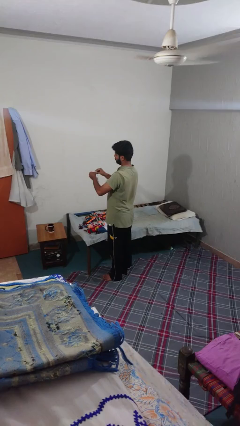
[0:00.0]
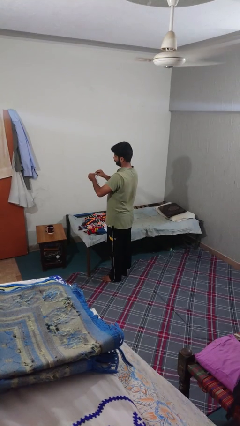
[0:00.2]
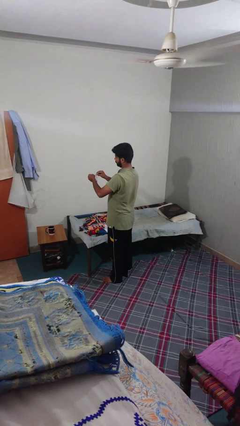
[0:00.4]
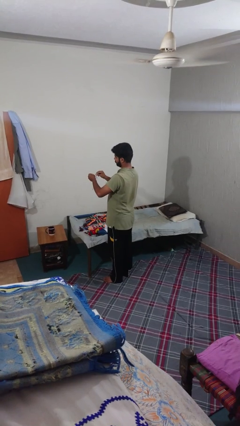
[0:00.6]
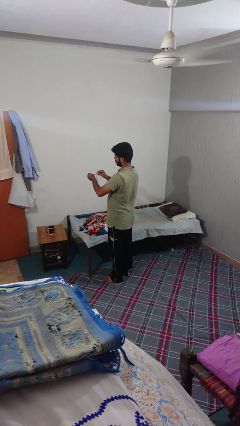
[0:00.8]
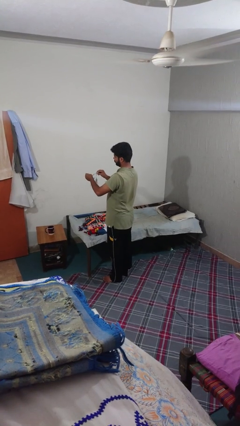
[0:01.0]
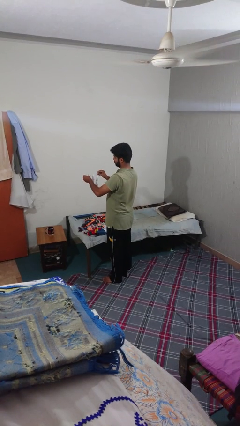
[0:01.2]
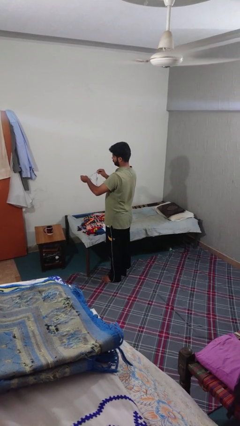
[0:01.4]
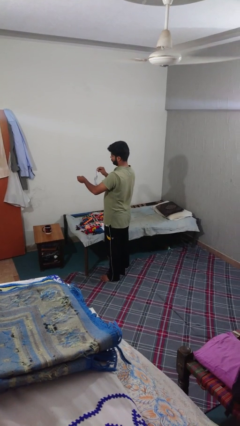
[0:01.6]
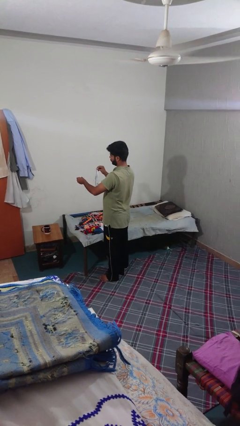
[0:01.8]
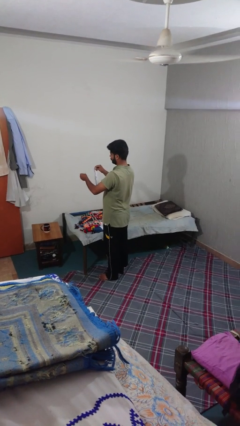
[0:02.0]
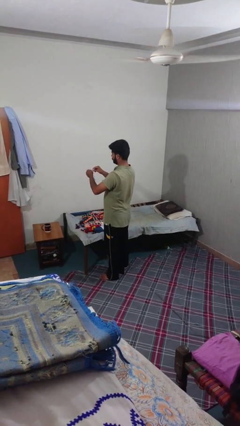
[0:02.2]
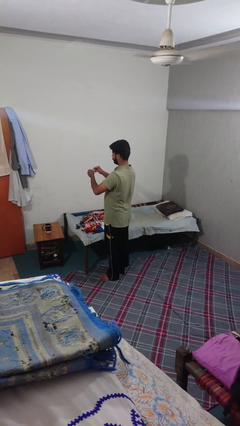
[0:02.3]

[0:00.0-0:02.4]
person tears paper

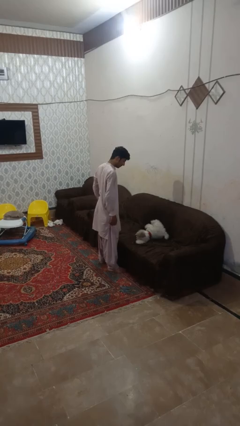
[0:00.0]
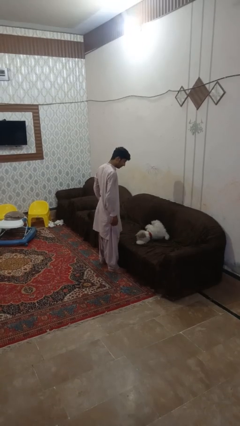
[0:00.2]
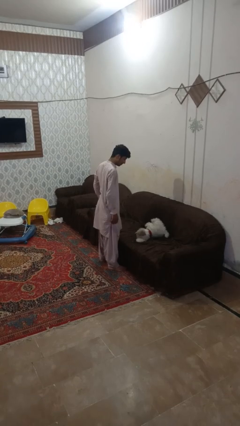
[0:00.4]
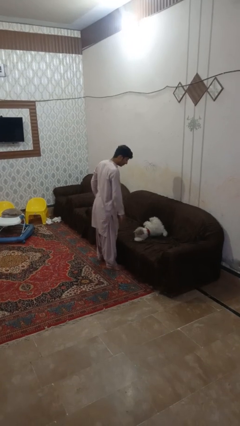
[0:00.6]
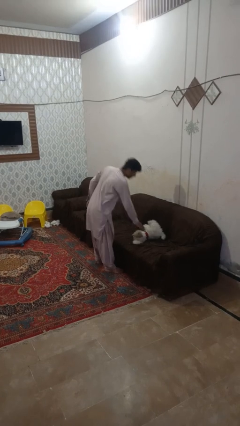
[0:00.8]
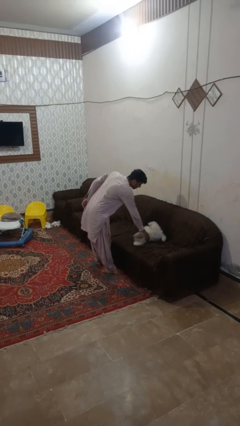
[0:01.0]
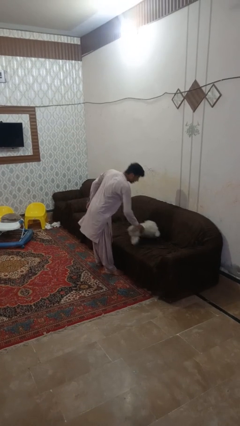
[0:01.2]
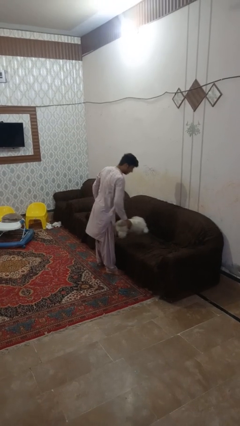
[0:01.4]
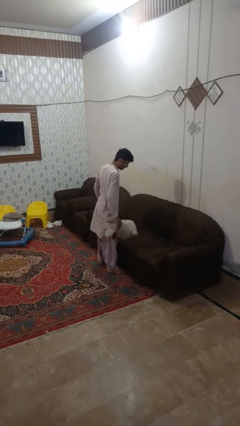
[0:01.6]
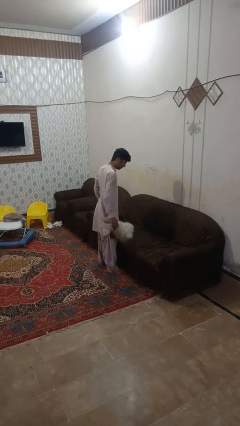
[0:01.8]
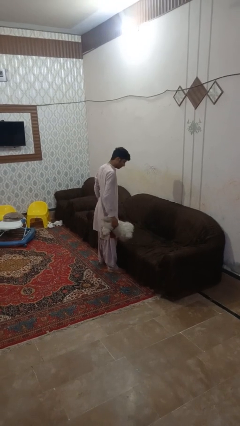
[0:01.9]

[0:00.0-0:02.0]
person picks up object from couch

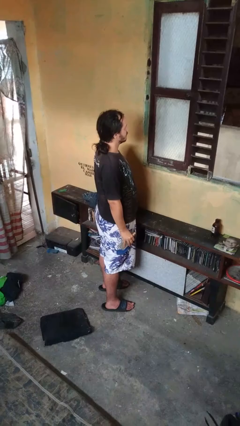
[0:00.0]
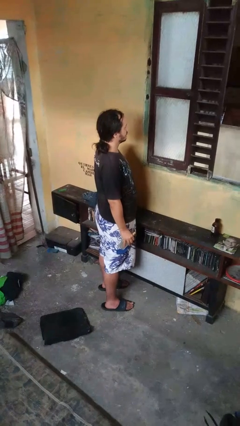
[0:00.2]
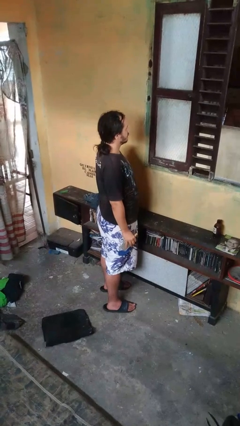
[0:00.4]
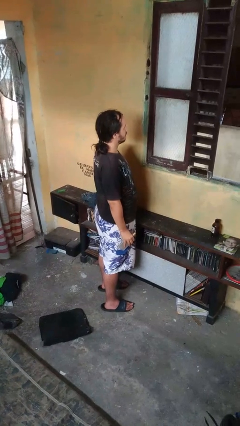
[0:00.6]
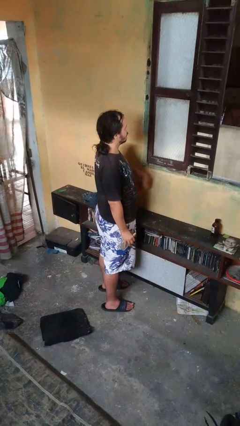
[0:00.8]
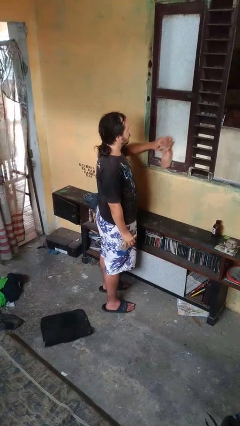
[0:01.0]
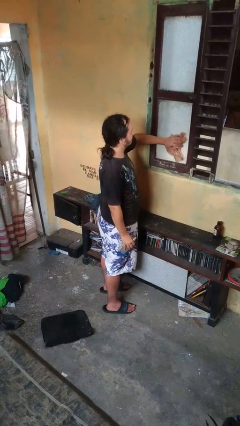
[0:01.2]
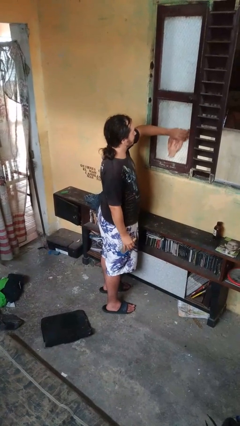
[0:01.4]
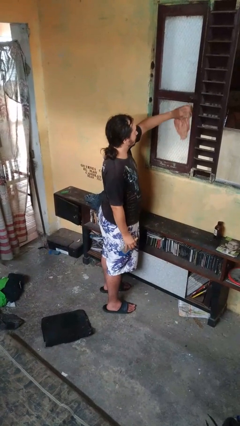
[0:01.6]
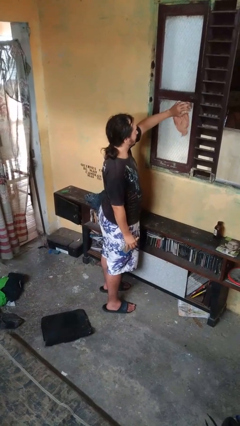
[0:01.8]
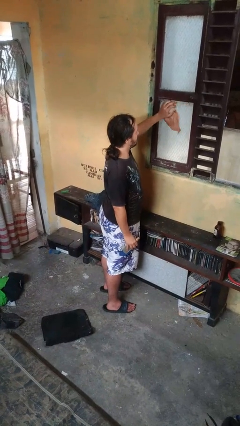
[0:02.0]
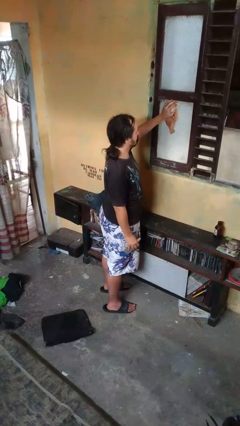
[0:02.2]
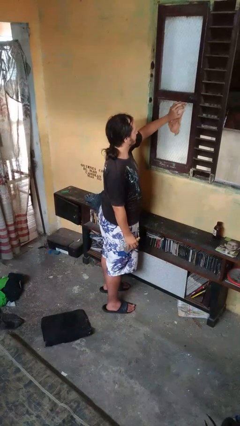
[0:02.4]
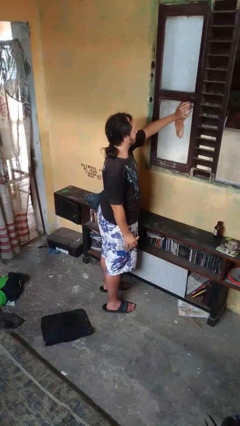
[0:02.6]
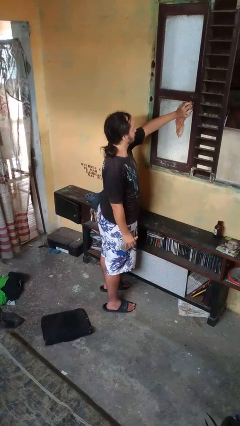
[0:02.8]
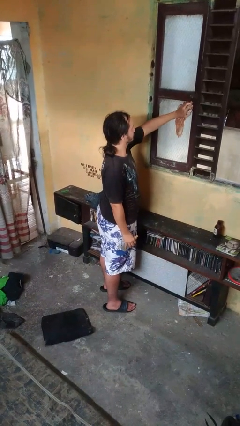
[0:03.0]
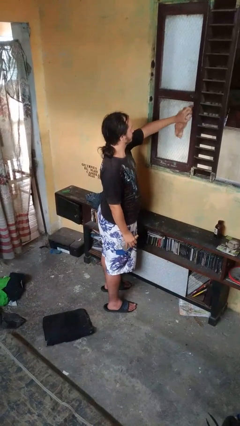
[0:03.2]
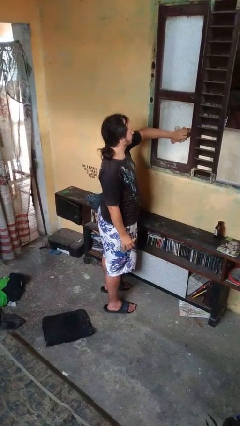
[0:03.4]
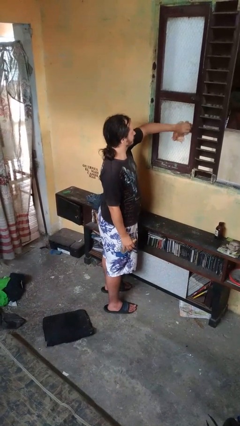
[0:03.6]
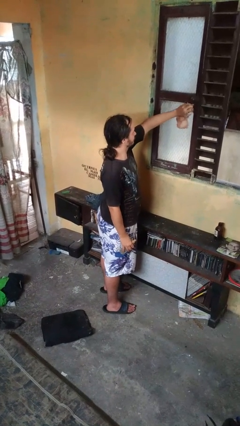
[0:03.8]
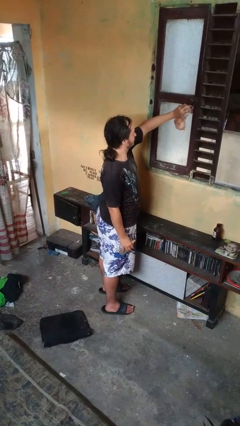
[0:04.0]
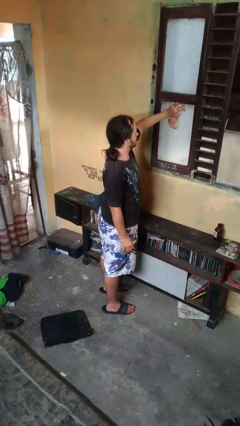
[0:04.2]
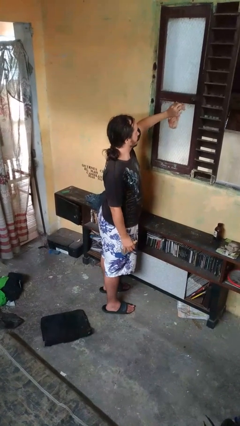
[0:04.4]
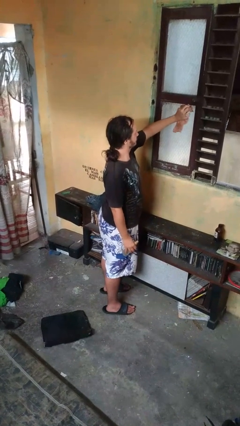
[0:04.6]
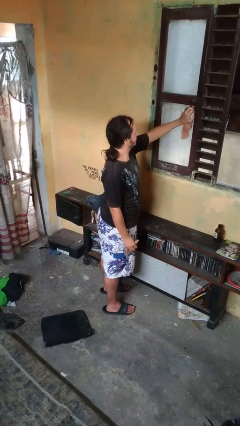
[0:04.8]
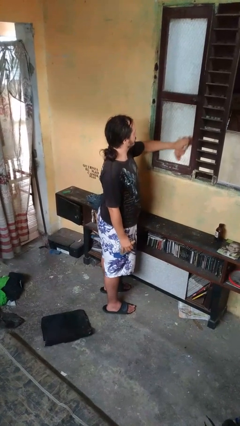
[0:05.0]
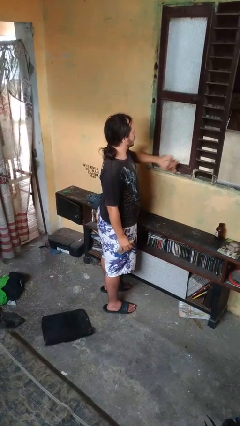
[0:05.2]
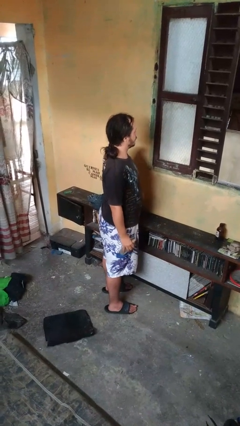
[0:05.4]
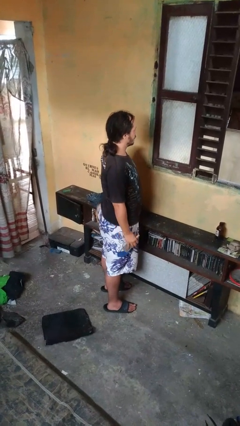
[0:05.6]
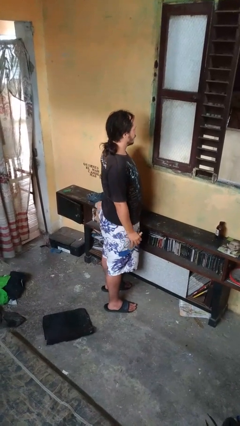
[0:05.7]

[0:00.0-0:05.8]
person washes window

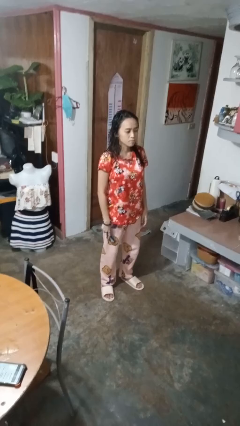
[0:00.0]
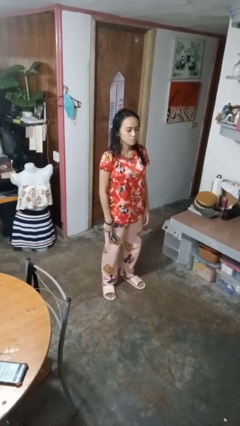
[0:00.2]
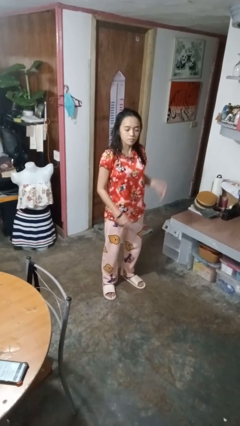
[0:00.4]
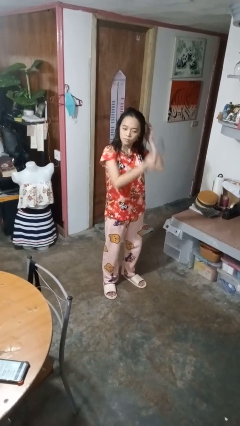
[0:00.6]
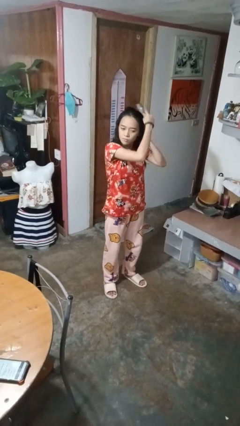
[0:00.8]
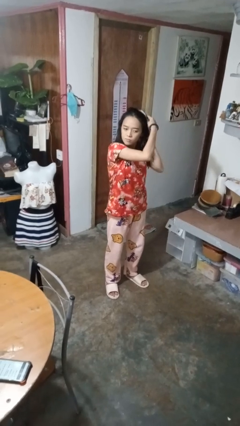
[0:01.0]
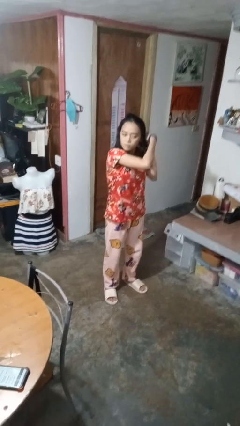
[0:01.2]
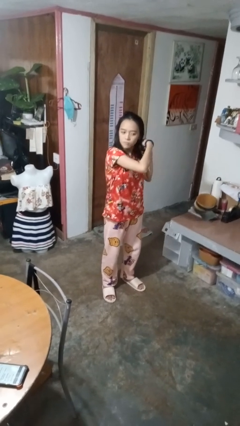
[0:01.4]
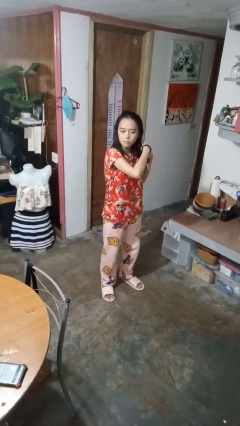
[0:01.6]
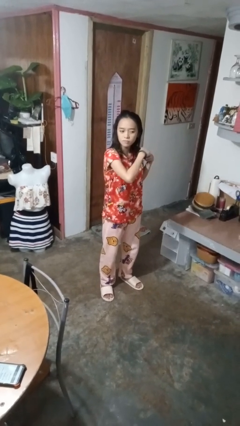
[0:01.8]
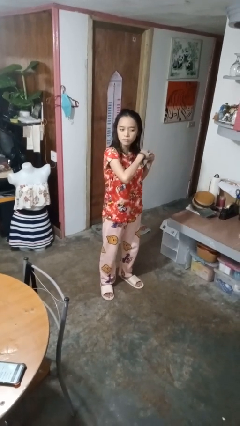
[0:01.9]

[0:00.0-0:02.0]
person brushes hair

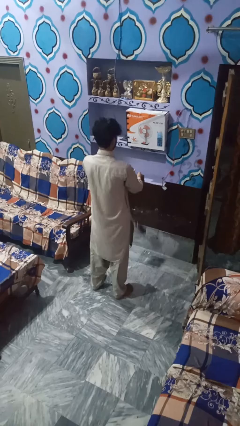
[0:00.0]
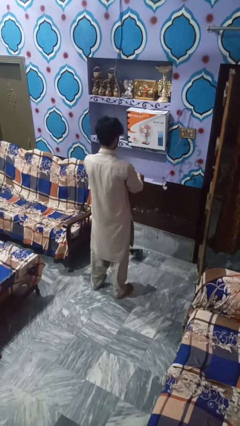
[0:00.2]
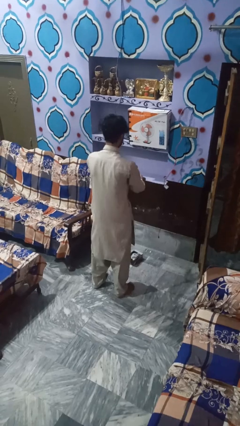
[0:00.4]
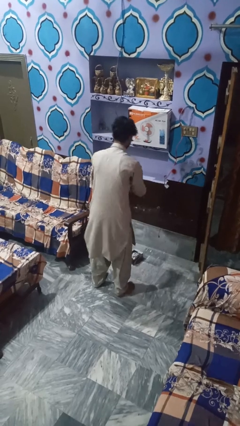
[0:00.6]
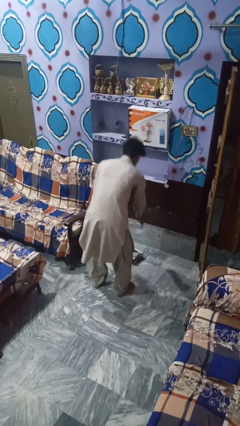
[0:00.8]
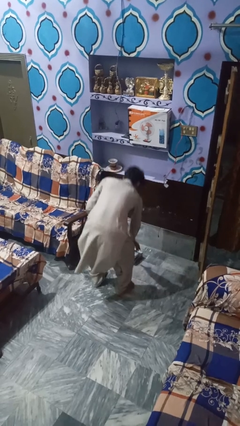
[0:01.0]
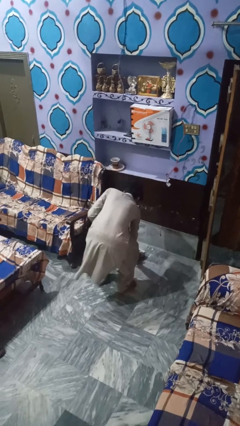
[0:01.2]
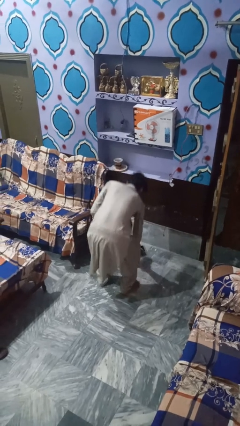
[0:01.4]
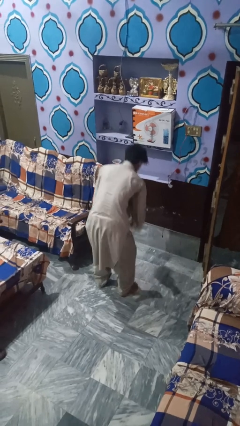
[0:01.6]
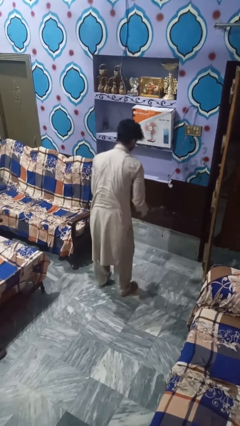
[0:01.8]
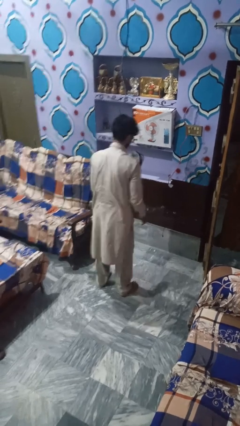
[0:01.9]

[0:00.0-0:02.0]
person picks up object from floor

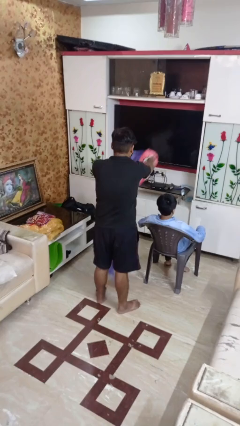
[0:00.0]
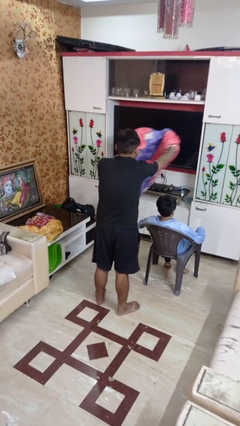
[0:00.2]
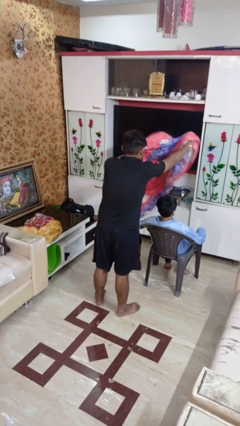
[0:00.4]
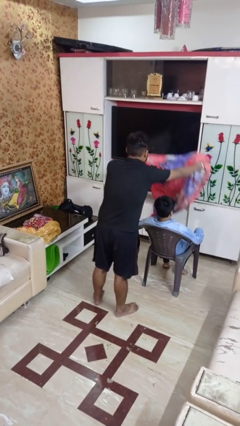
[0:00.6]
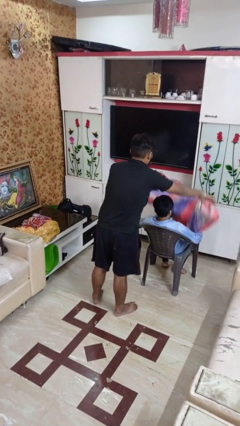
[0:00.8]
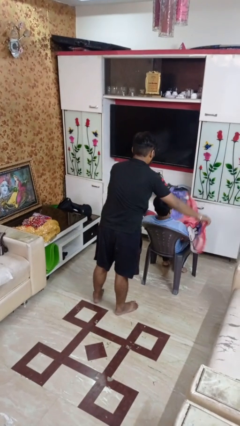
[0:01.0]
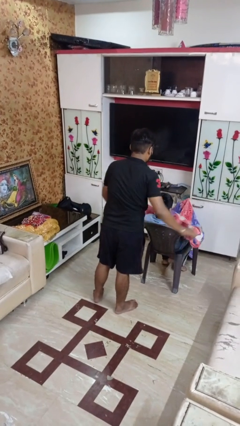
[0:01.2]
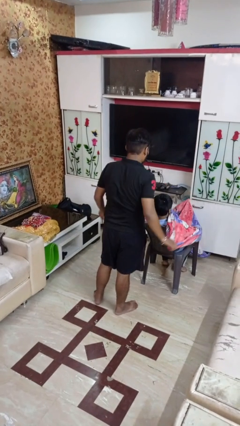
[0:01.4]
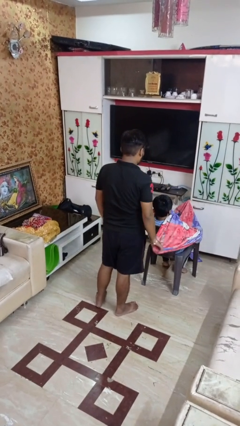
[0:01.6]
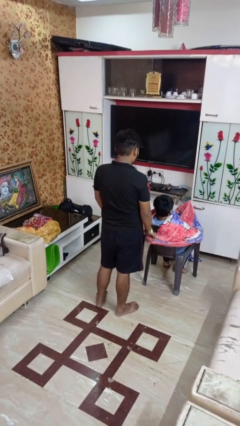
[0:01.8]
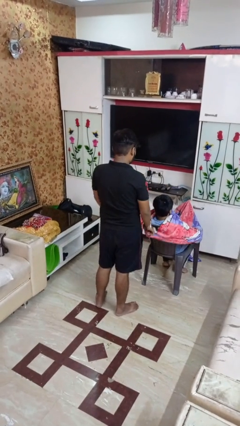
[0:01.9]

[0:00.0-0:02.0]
person covers friend with blanket

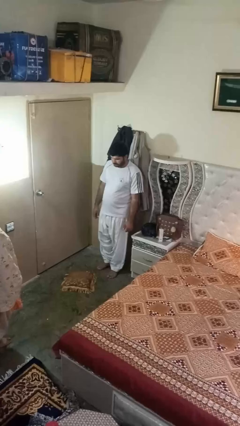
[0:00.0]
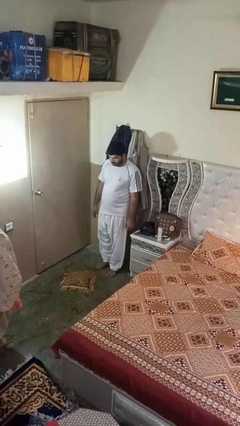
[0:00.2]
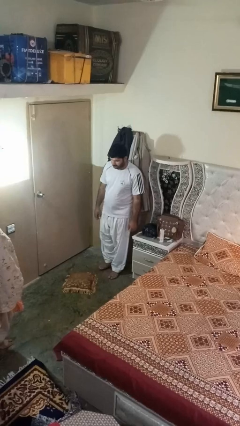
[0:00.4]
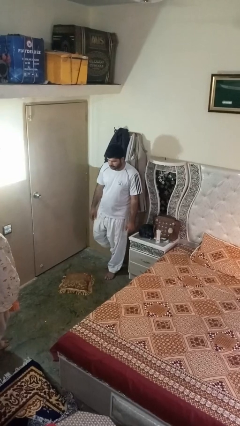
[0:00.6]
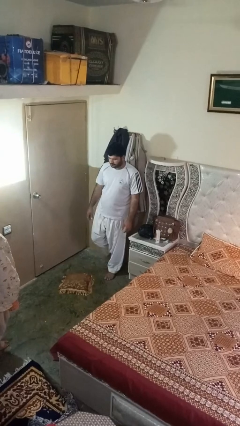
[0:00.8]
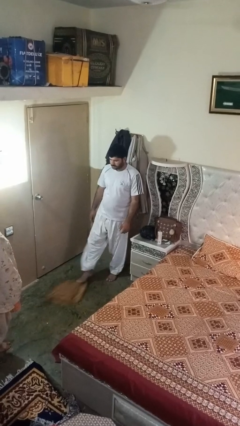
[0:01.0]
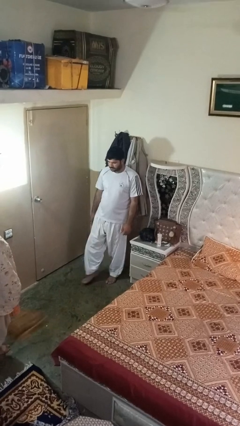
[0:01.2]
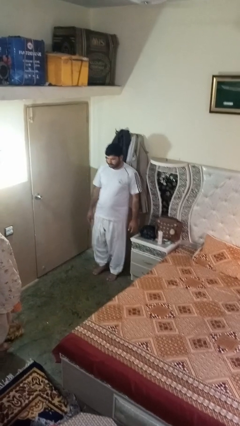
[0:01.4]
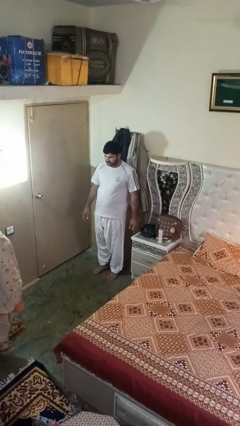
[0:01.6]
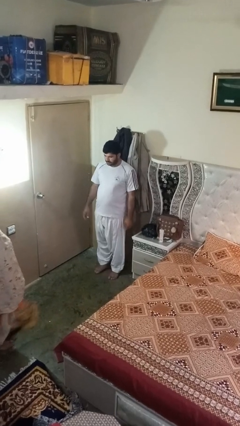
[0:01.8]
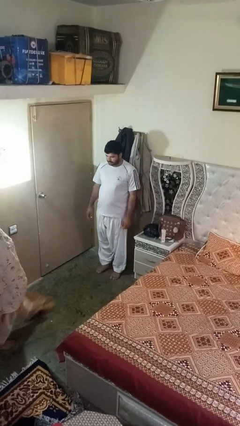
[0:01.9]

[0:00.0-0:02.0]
person kicks object to person
